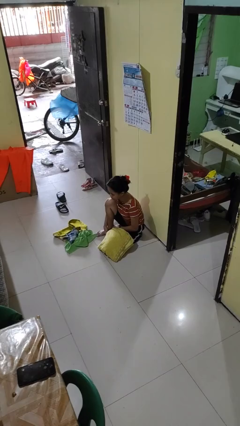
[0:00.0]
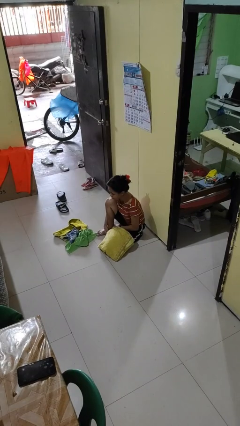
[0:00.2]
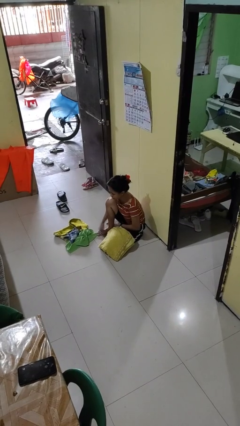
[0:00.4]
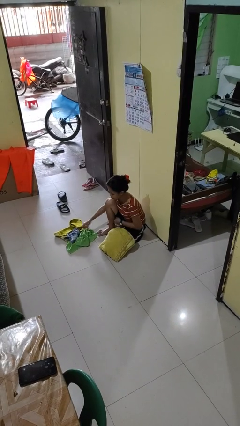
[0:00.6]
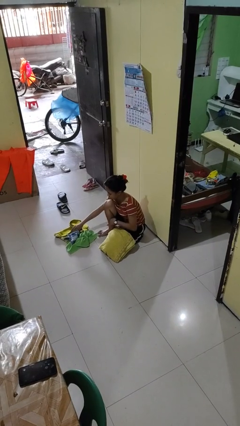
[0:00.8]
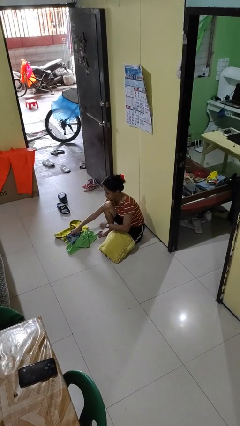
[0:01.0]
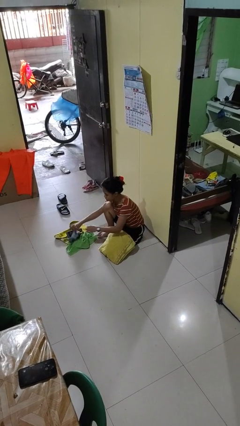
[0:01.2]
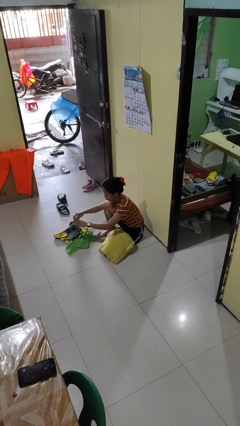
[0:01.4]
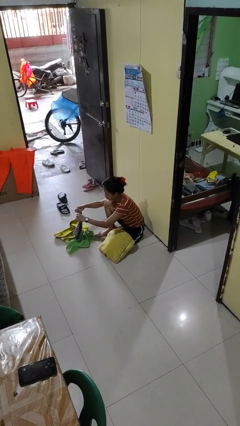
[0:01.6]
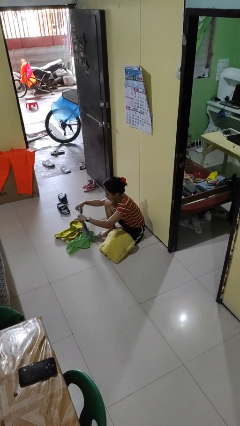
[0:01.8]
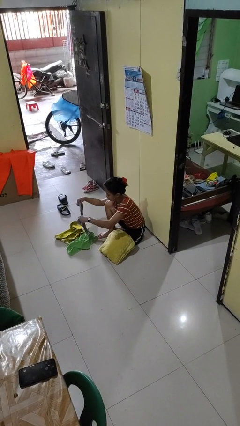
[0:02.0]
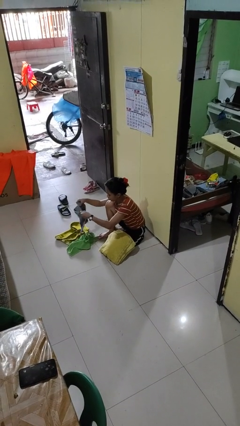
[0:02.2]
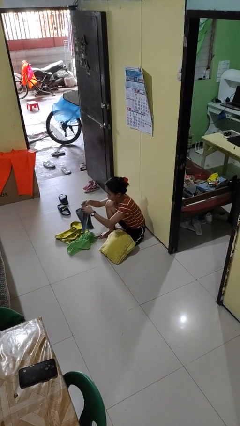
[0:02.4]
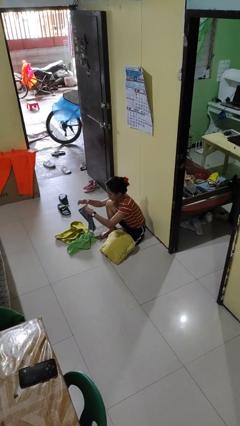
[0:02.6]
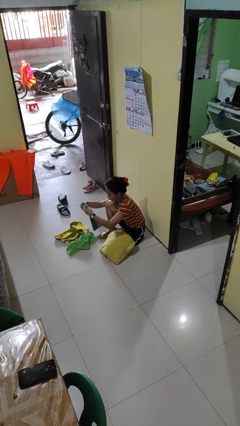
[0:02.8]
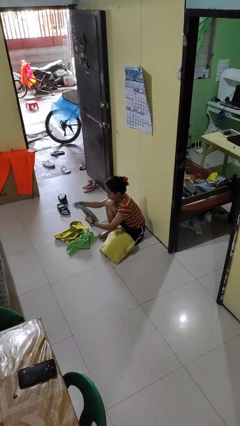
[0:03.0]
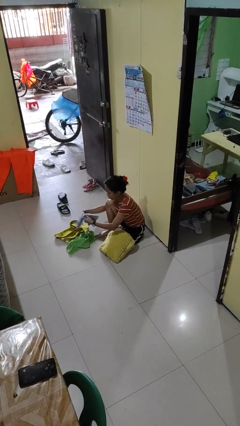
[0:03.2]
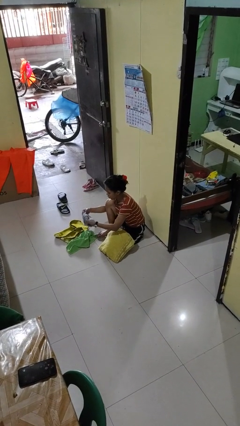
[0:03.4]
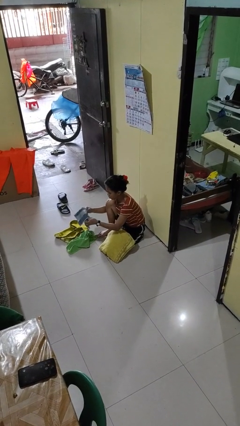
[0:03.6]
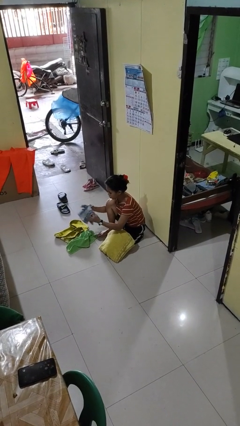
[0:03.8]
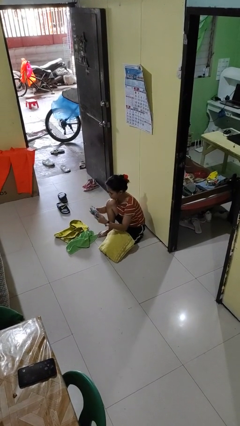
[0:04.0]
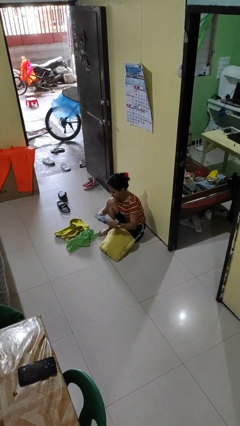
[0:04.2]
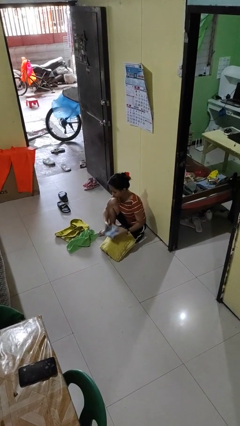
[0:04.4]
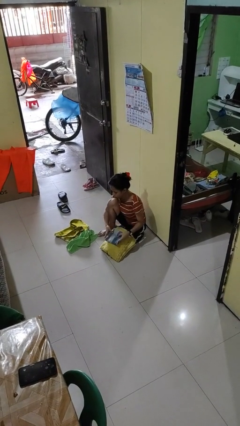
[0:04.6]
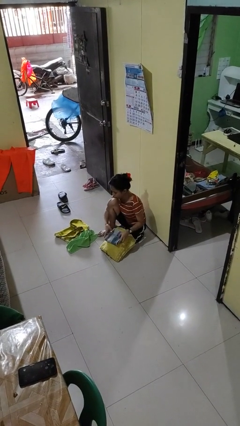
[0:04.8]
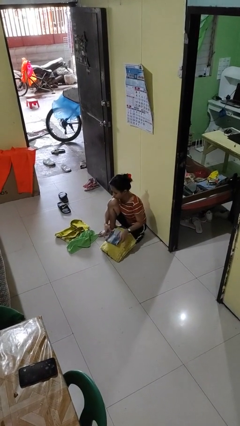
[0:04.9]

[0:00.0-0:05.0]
person folds towel

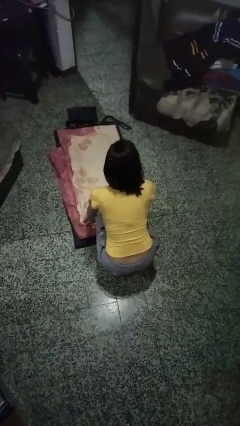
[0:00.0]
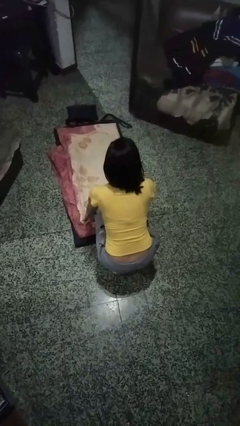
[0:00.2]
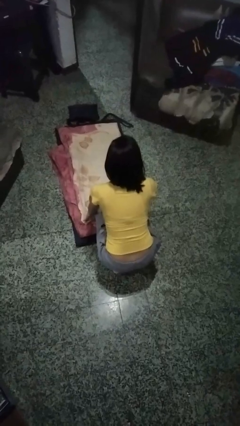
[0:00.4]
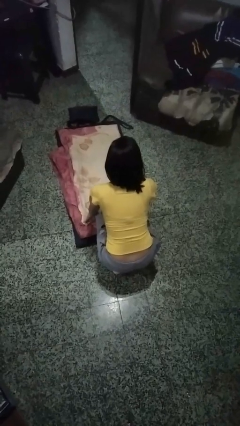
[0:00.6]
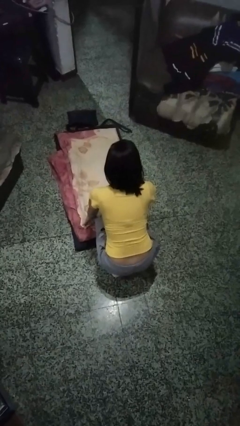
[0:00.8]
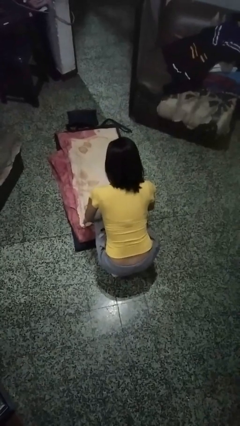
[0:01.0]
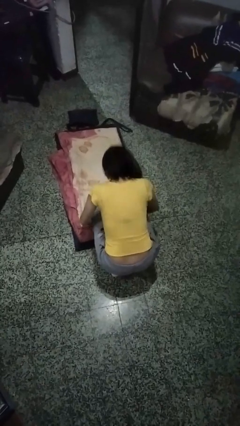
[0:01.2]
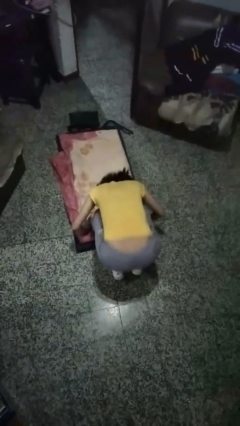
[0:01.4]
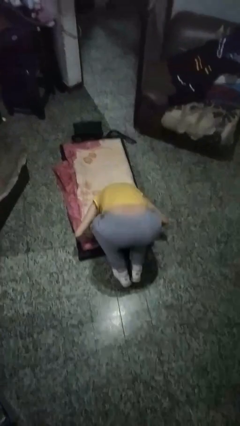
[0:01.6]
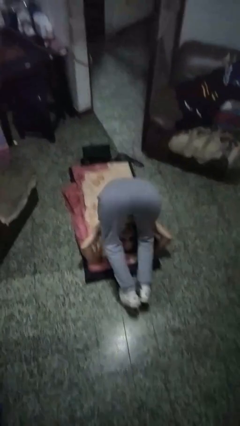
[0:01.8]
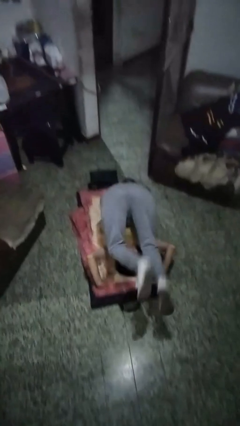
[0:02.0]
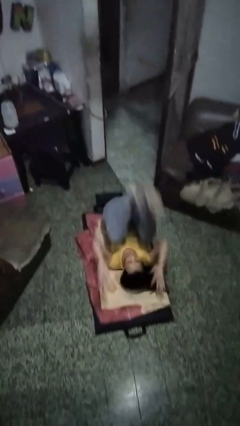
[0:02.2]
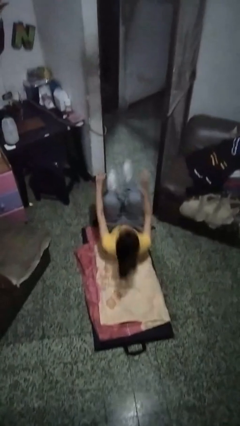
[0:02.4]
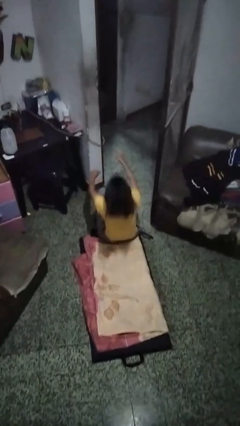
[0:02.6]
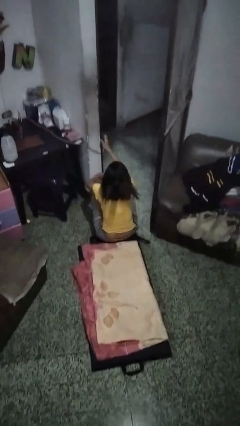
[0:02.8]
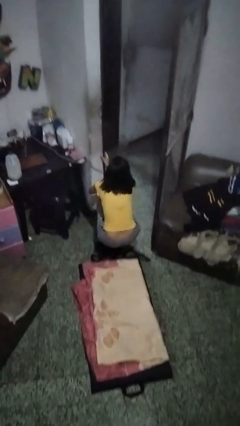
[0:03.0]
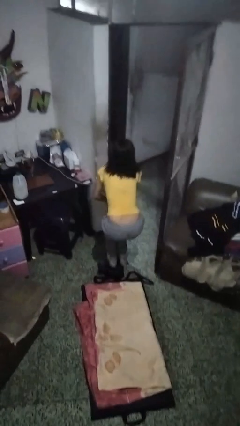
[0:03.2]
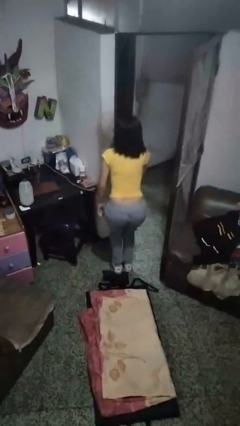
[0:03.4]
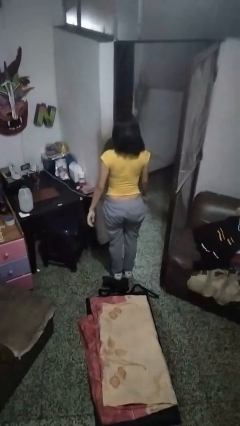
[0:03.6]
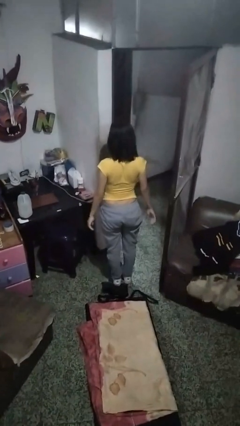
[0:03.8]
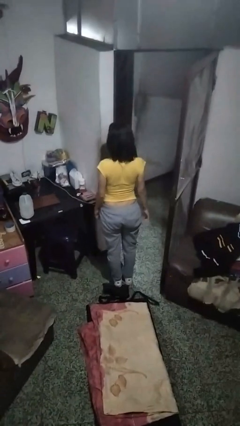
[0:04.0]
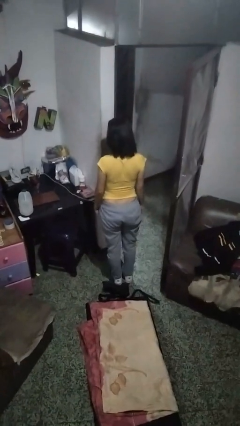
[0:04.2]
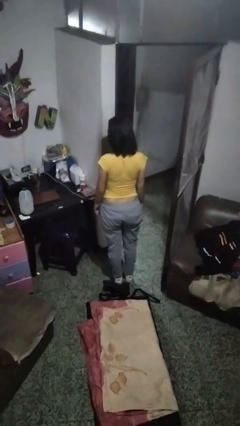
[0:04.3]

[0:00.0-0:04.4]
person somersaults

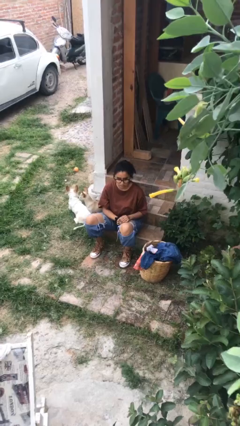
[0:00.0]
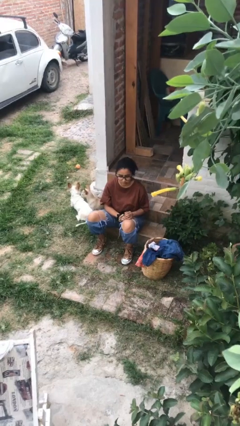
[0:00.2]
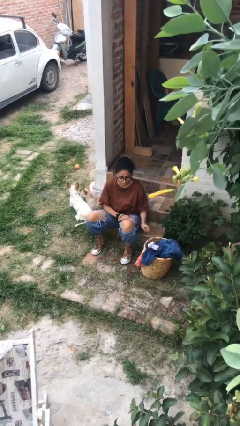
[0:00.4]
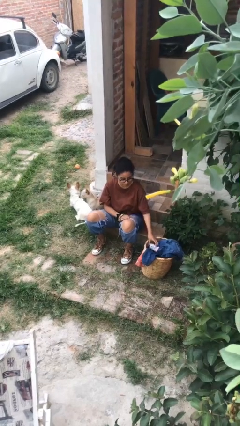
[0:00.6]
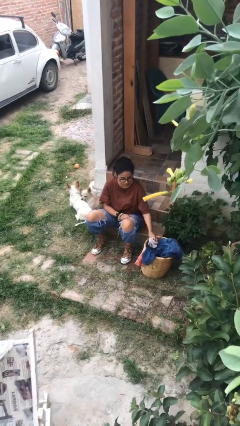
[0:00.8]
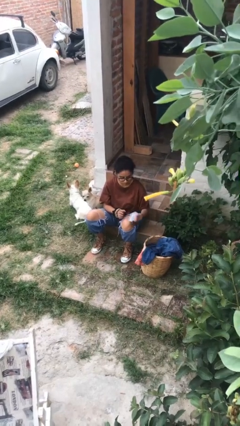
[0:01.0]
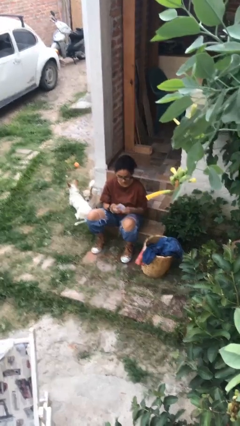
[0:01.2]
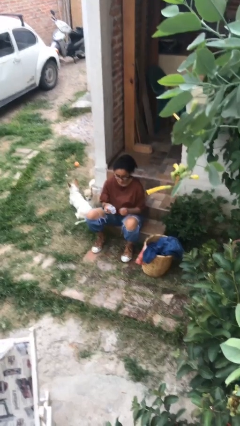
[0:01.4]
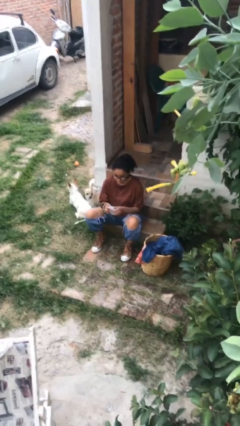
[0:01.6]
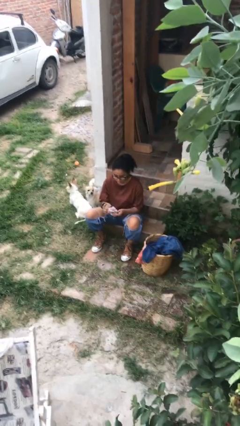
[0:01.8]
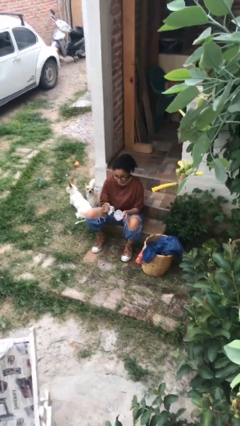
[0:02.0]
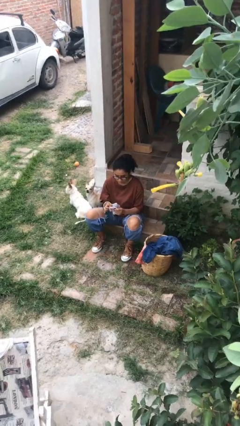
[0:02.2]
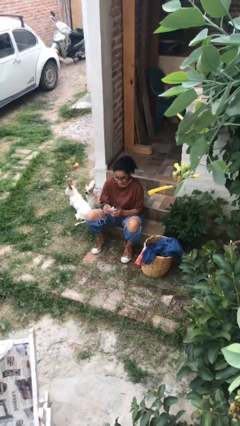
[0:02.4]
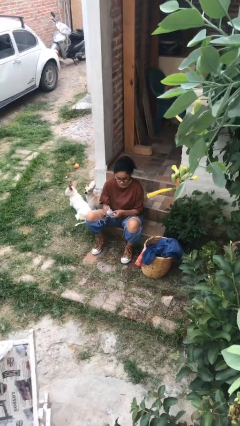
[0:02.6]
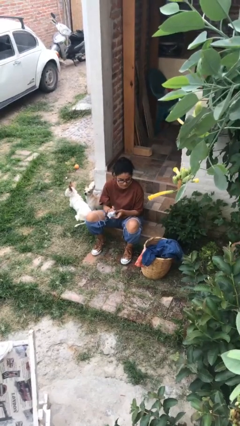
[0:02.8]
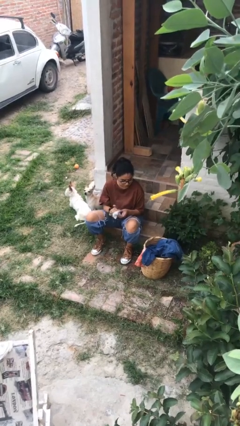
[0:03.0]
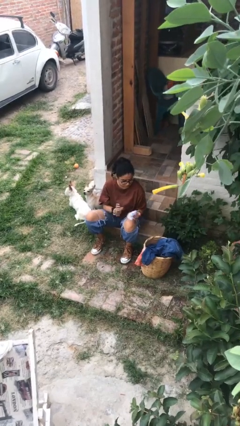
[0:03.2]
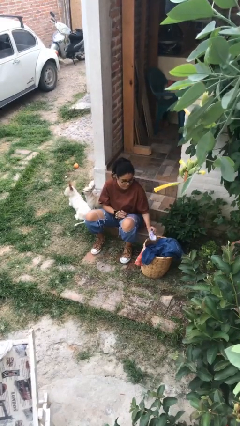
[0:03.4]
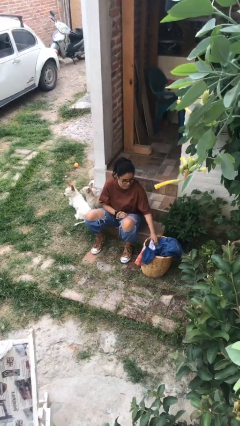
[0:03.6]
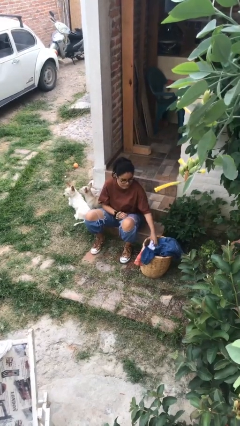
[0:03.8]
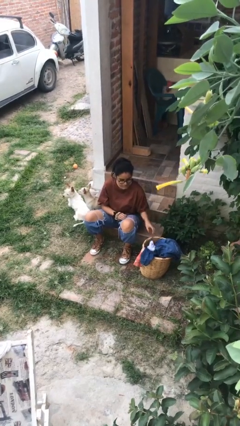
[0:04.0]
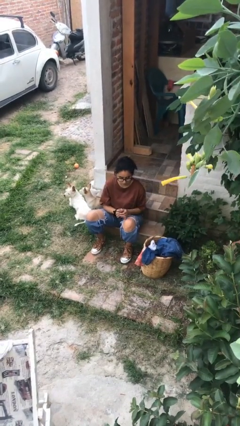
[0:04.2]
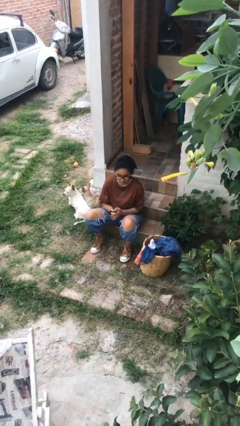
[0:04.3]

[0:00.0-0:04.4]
person folds socks

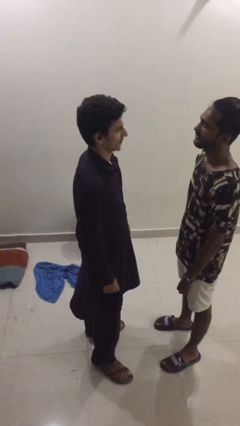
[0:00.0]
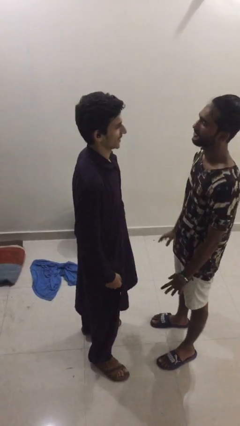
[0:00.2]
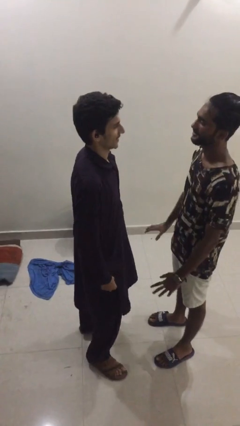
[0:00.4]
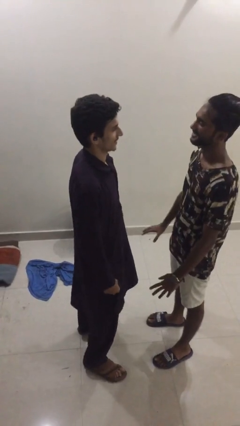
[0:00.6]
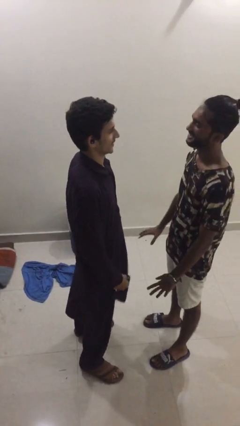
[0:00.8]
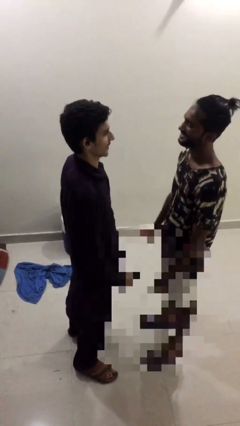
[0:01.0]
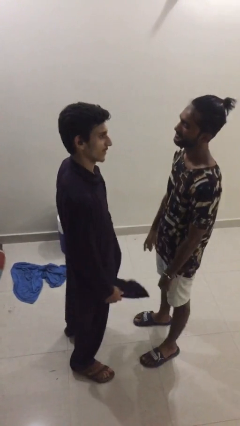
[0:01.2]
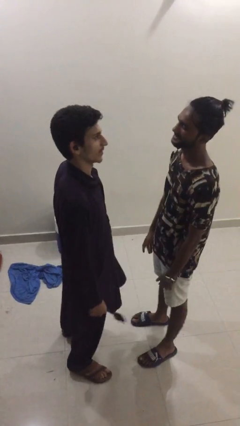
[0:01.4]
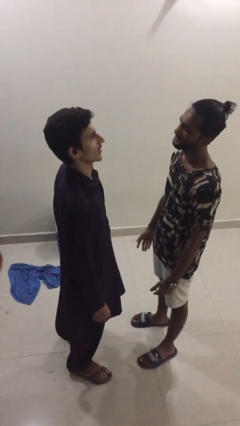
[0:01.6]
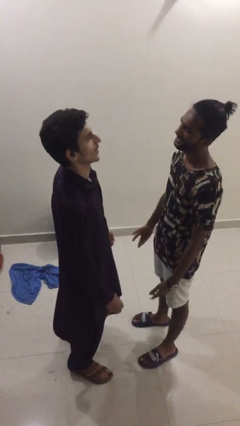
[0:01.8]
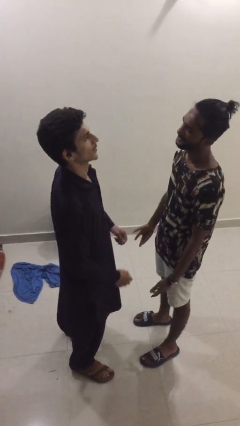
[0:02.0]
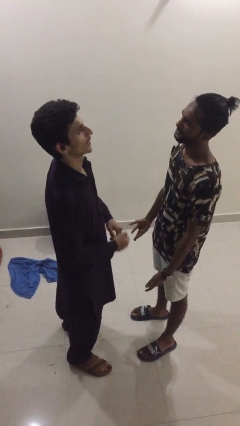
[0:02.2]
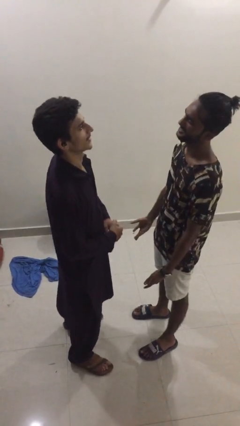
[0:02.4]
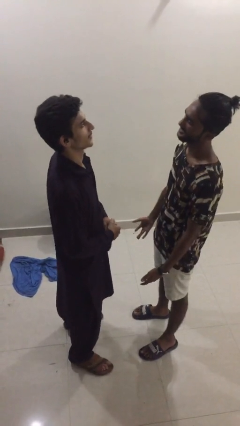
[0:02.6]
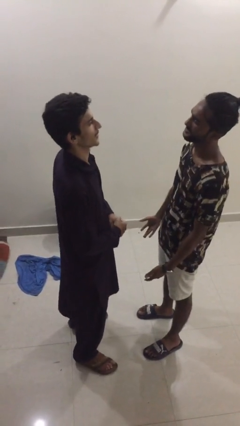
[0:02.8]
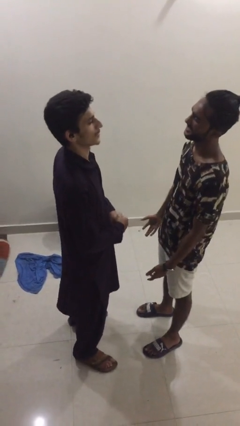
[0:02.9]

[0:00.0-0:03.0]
person talks to person

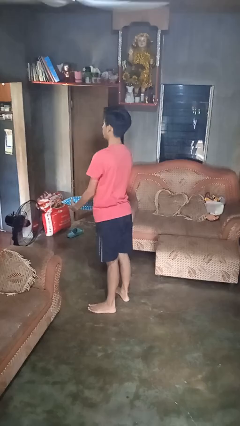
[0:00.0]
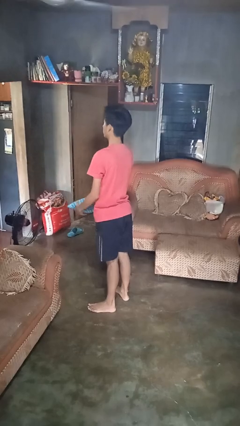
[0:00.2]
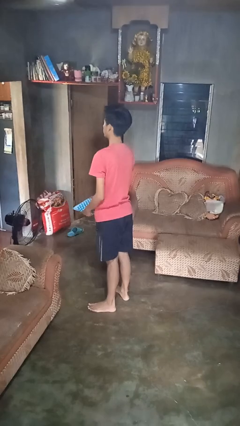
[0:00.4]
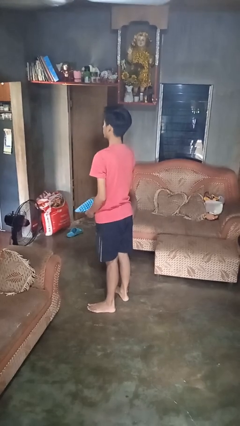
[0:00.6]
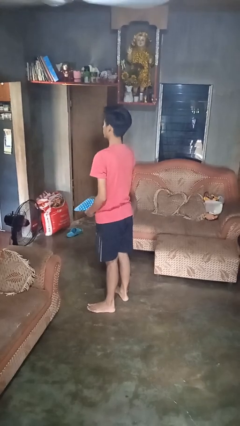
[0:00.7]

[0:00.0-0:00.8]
person catches dropped object
